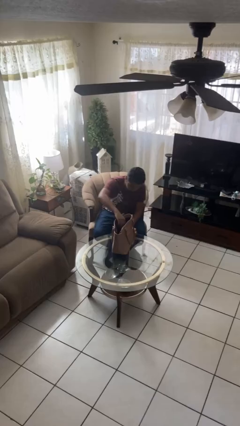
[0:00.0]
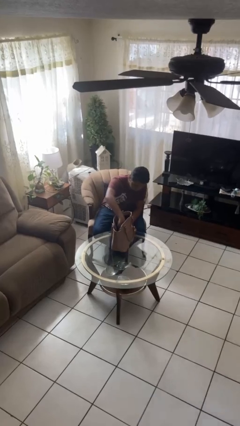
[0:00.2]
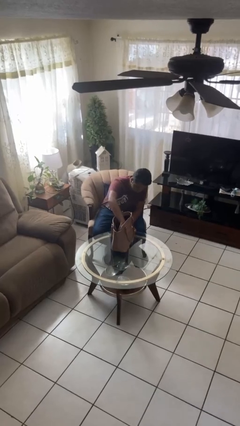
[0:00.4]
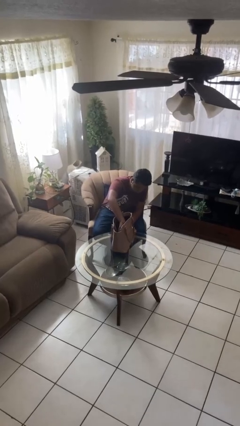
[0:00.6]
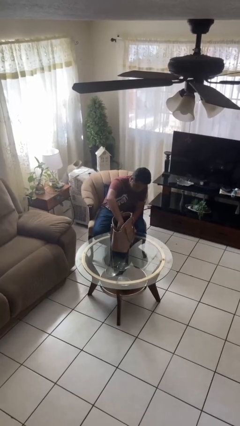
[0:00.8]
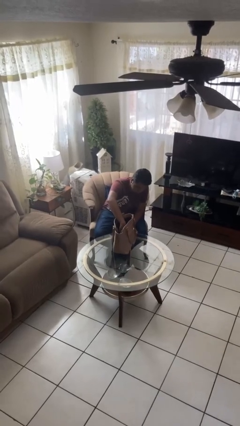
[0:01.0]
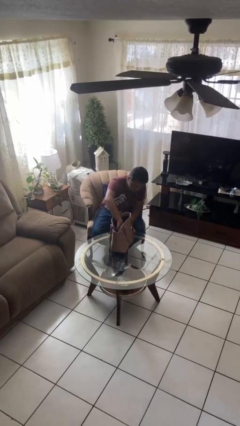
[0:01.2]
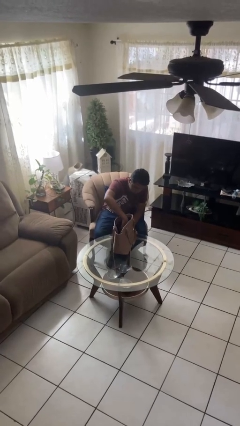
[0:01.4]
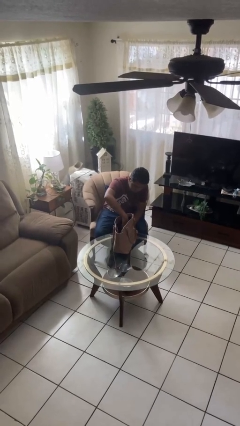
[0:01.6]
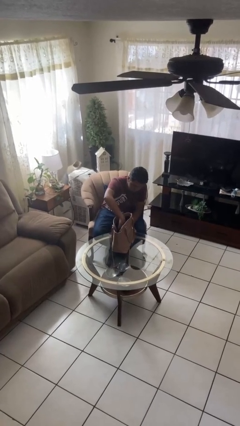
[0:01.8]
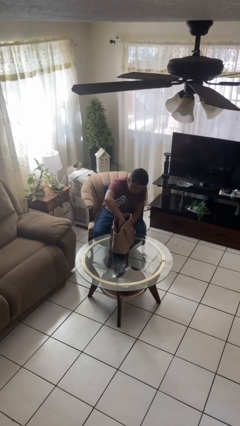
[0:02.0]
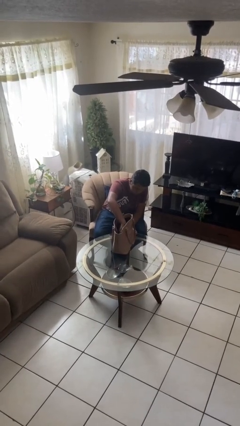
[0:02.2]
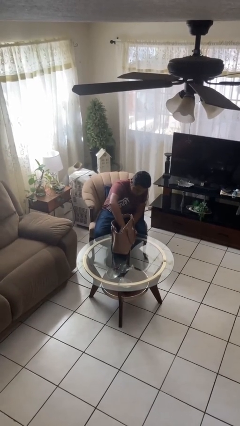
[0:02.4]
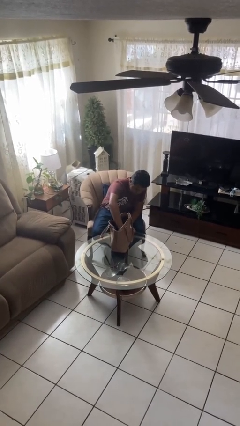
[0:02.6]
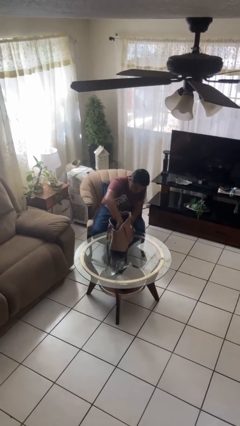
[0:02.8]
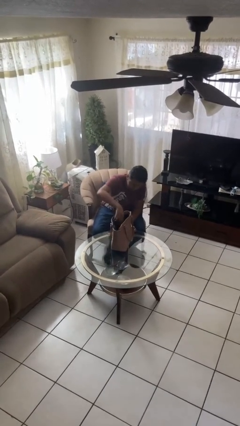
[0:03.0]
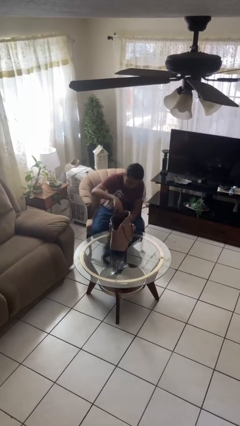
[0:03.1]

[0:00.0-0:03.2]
person searches in purse

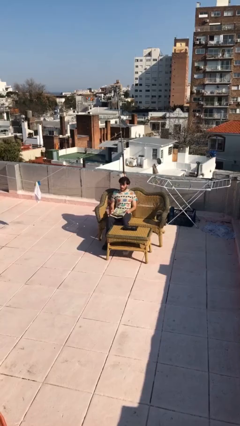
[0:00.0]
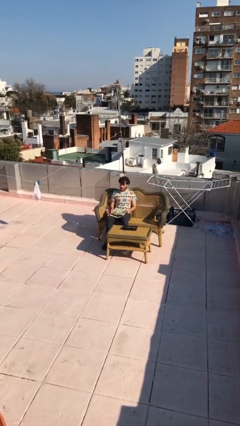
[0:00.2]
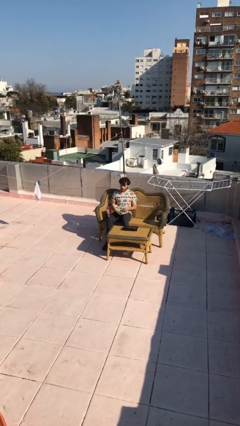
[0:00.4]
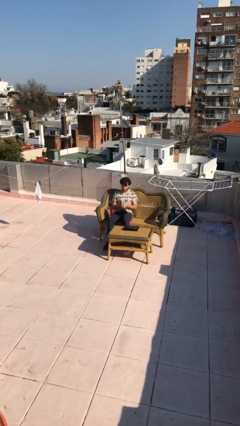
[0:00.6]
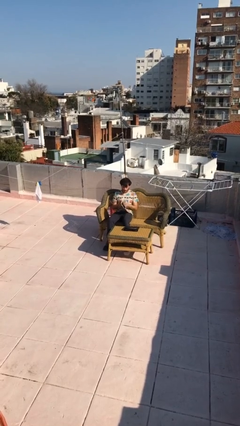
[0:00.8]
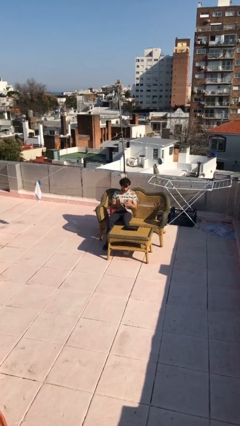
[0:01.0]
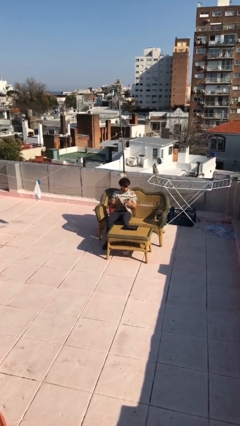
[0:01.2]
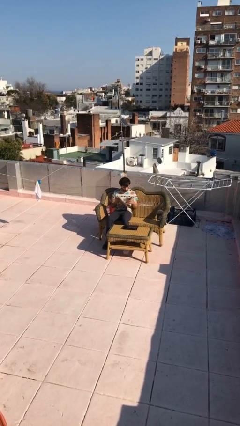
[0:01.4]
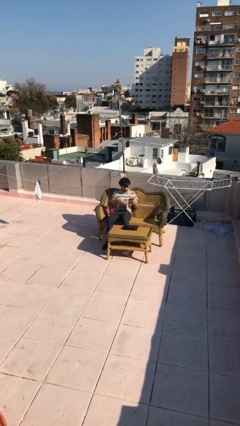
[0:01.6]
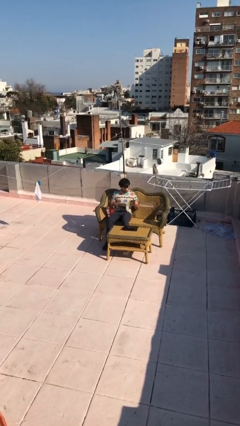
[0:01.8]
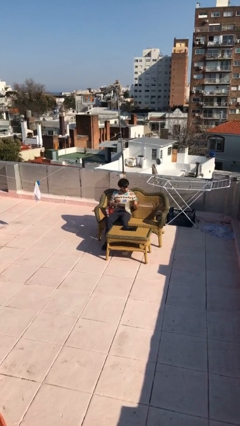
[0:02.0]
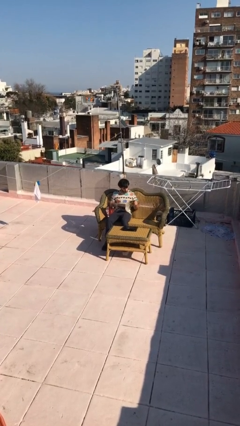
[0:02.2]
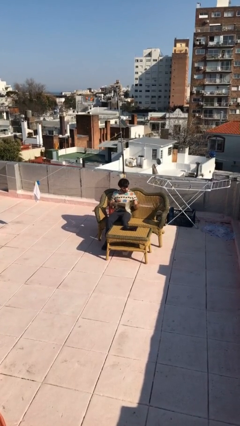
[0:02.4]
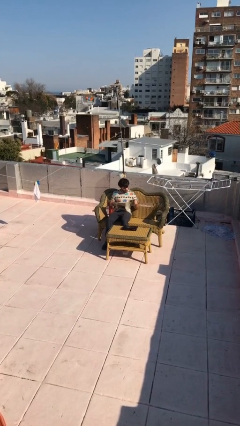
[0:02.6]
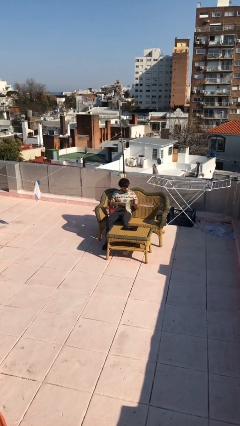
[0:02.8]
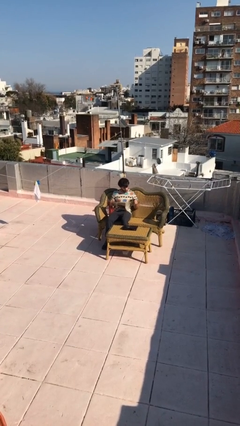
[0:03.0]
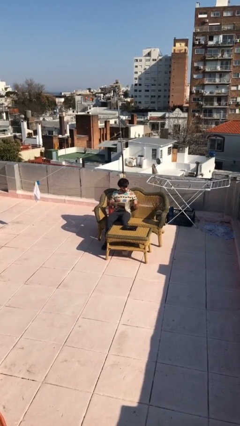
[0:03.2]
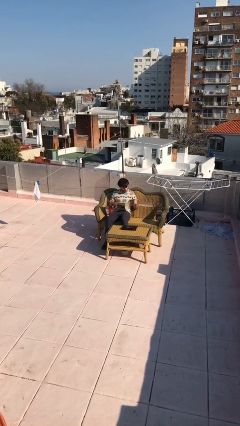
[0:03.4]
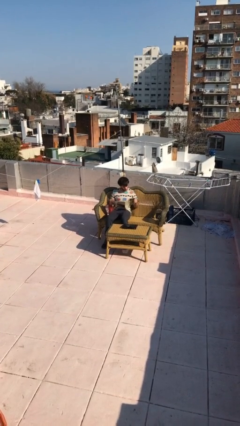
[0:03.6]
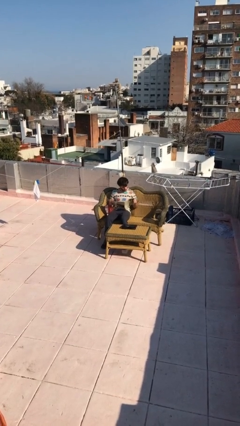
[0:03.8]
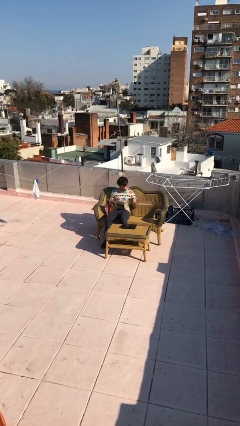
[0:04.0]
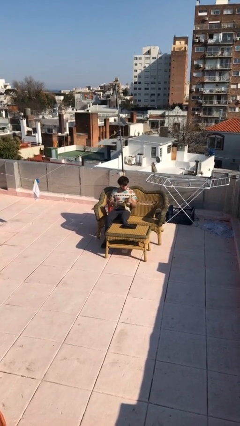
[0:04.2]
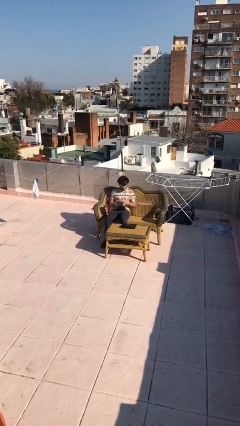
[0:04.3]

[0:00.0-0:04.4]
person reads newspaper

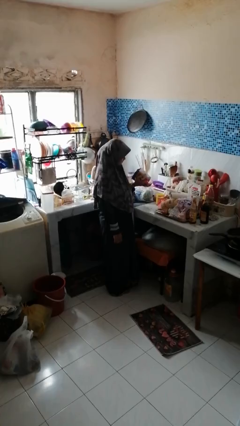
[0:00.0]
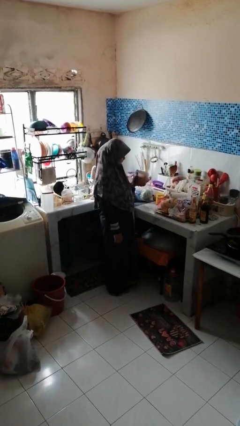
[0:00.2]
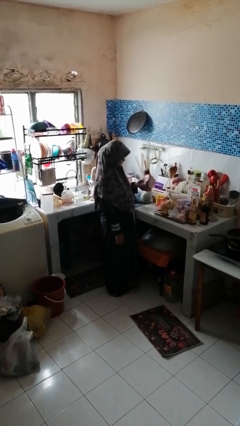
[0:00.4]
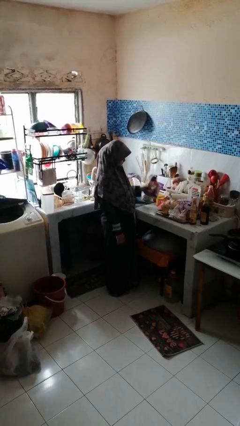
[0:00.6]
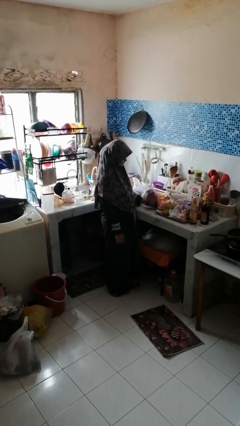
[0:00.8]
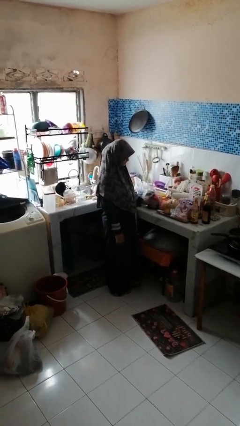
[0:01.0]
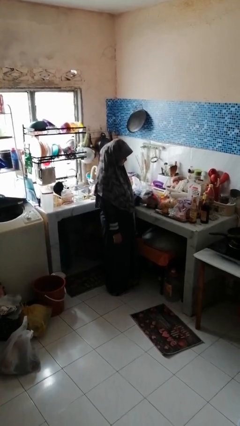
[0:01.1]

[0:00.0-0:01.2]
person puts down object on countertop

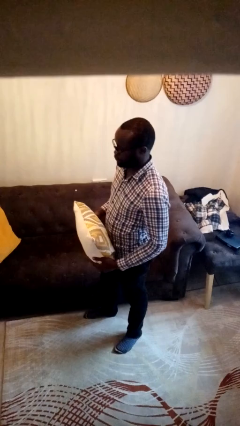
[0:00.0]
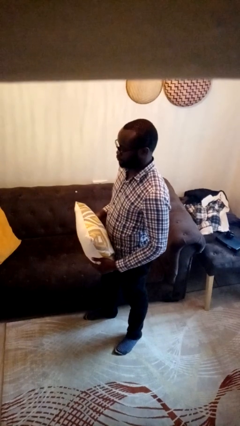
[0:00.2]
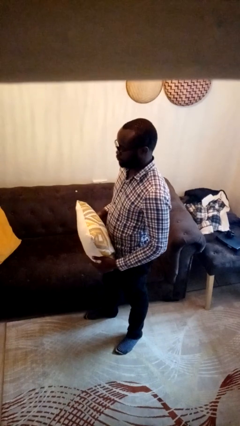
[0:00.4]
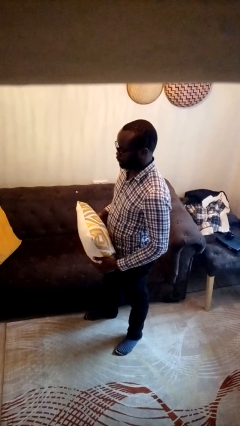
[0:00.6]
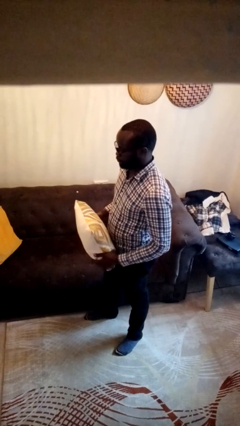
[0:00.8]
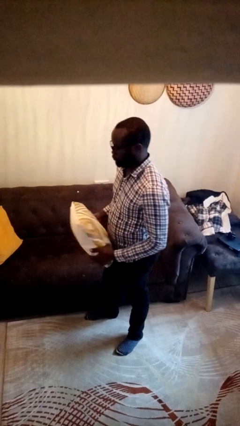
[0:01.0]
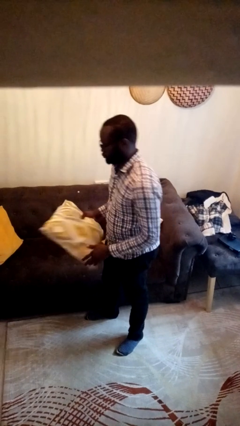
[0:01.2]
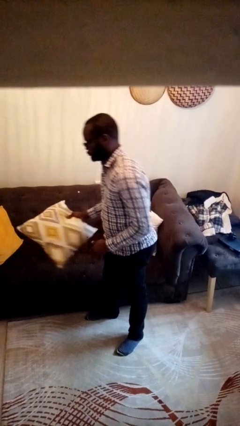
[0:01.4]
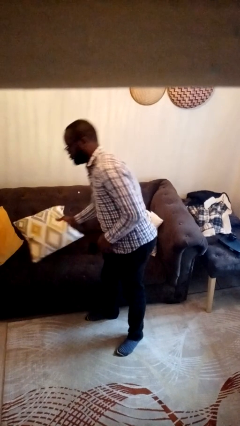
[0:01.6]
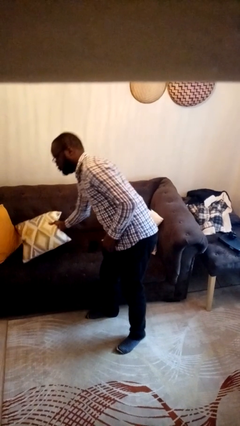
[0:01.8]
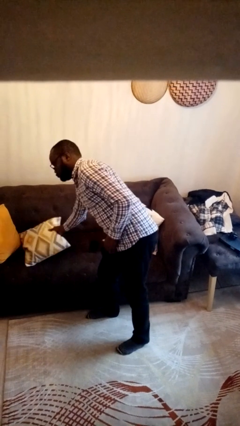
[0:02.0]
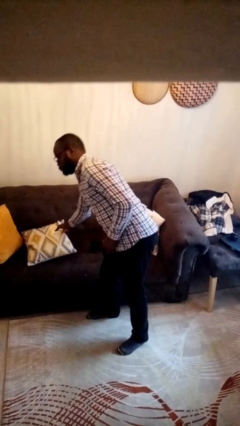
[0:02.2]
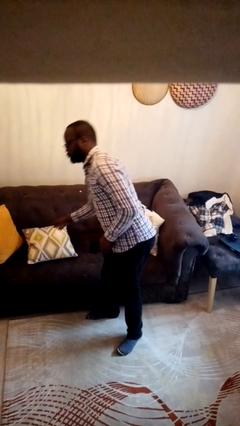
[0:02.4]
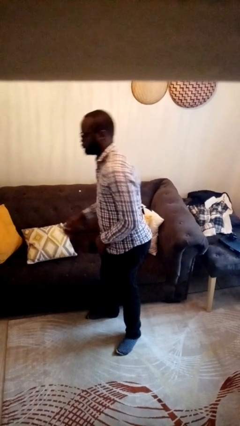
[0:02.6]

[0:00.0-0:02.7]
person puts down object on couch

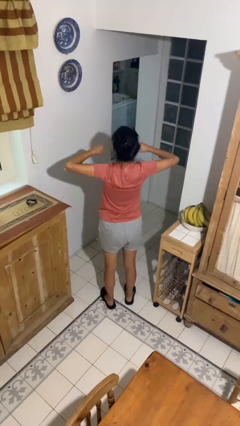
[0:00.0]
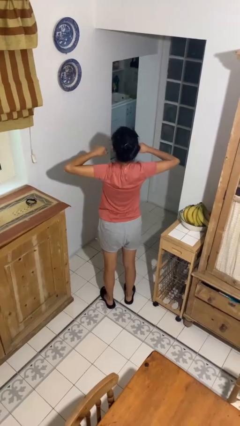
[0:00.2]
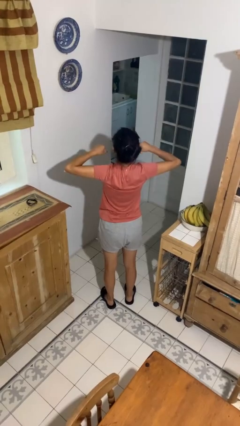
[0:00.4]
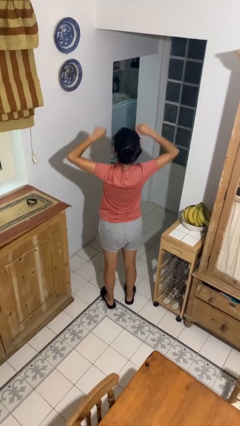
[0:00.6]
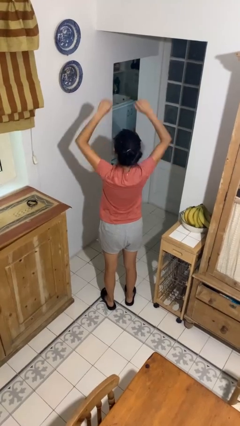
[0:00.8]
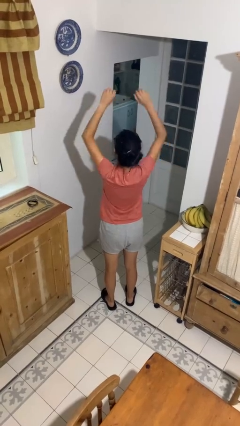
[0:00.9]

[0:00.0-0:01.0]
person stretches arms to side

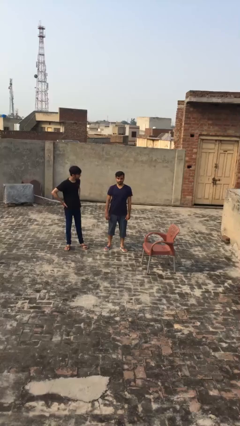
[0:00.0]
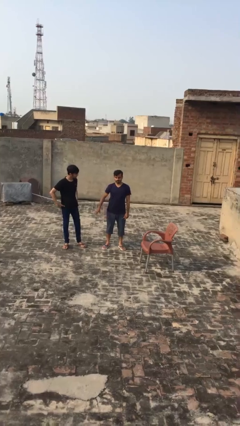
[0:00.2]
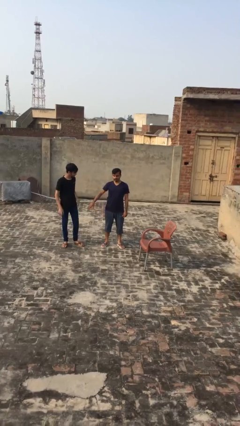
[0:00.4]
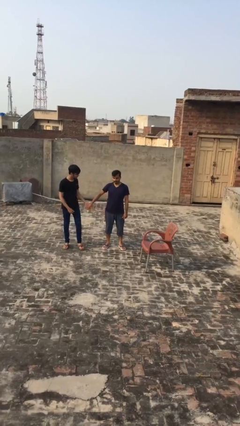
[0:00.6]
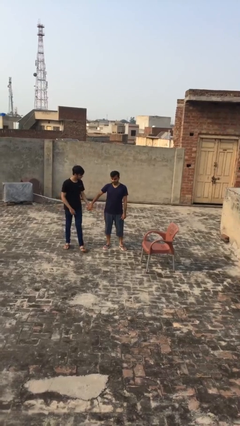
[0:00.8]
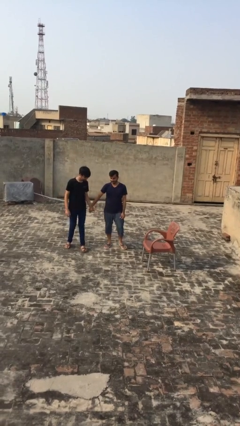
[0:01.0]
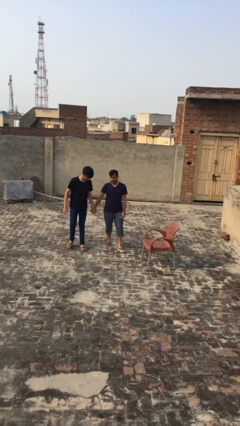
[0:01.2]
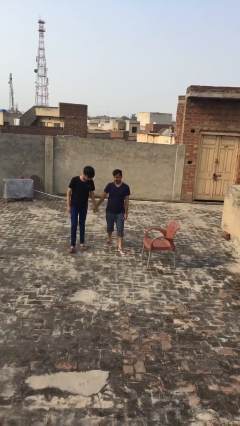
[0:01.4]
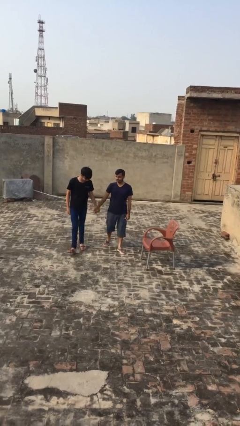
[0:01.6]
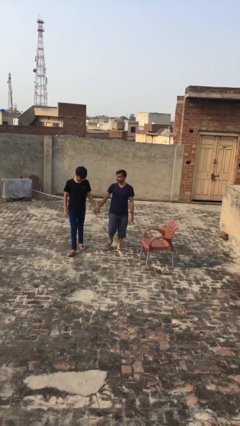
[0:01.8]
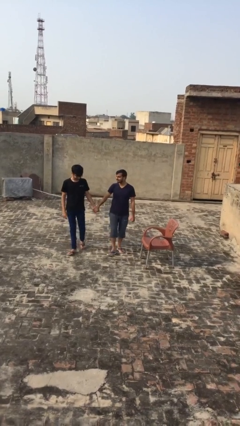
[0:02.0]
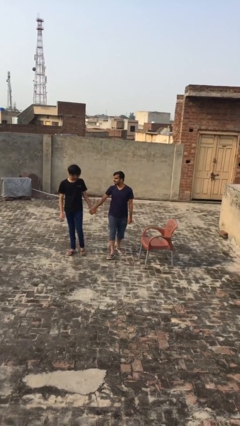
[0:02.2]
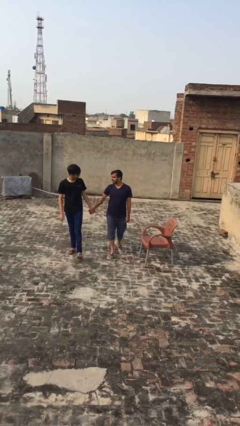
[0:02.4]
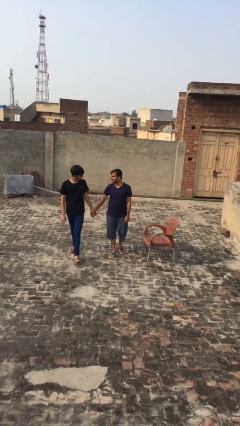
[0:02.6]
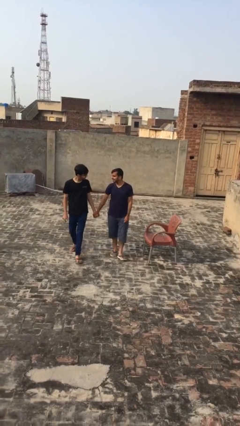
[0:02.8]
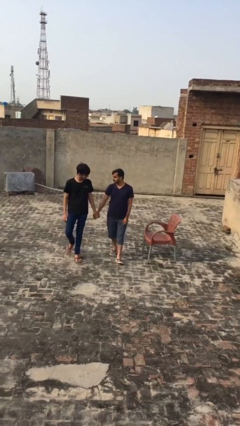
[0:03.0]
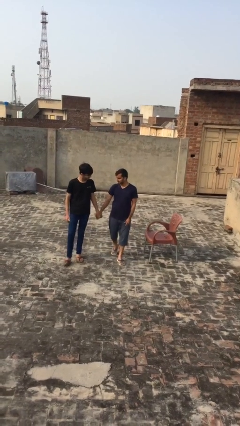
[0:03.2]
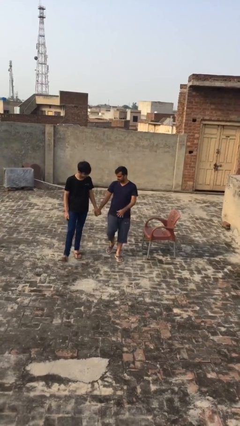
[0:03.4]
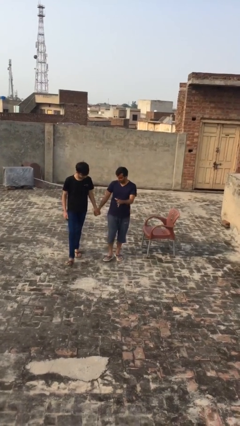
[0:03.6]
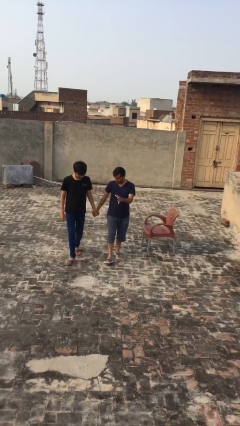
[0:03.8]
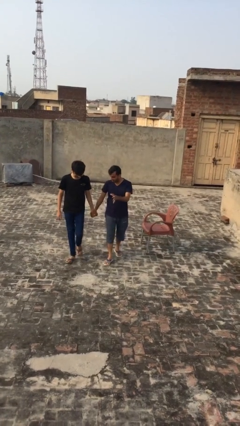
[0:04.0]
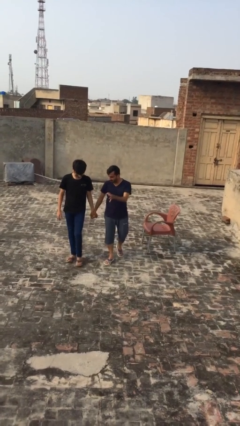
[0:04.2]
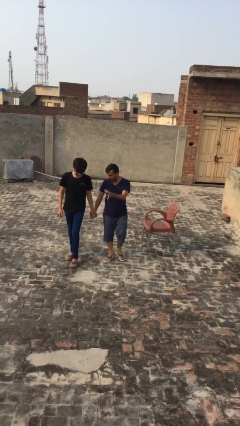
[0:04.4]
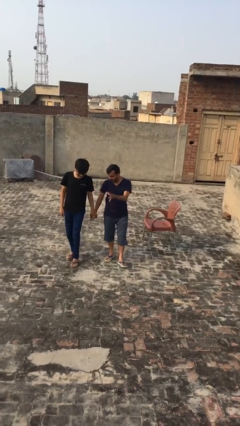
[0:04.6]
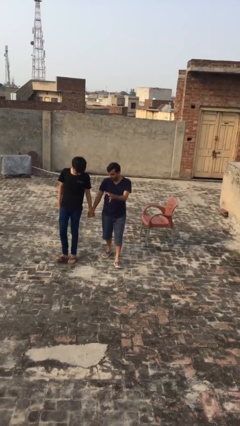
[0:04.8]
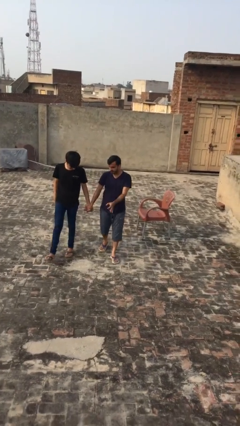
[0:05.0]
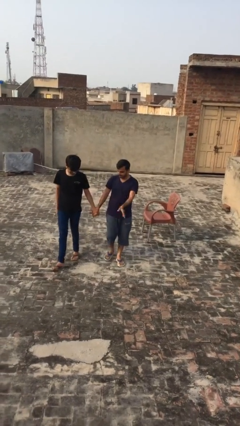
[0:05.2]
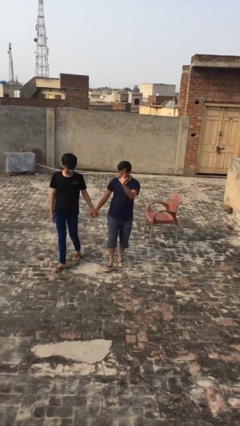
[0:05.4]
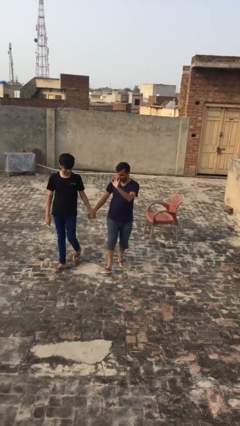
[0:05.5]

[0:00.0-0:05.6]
person holds hand
